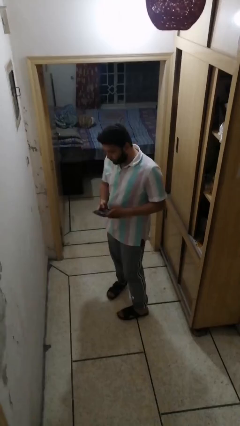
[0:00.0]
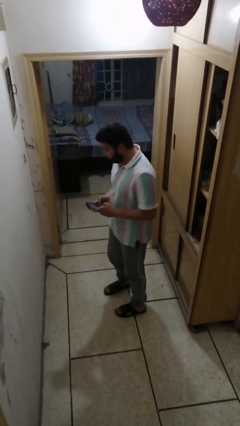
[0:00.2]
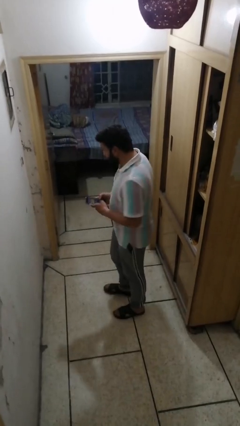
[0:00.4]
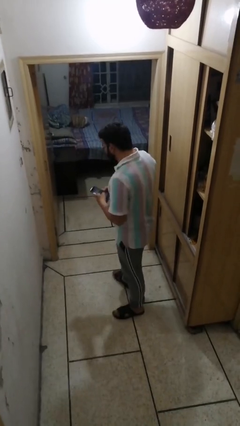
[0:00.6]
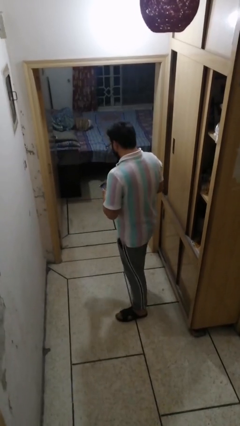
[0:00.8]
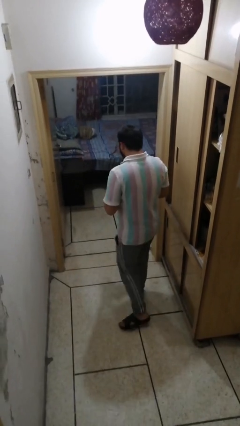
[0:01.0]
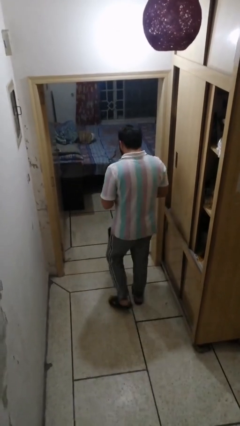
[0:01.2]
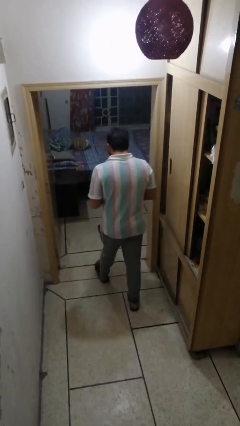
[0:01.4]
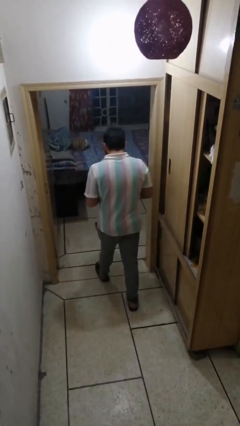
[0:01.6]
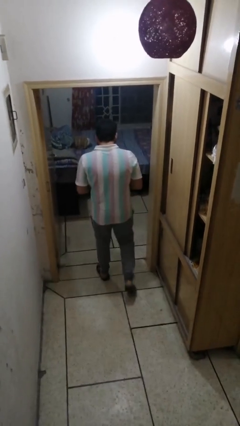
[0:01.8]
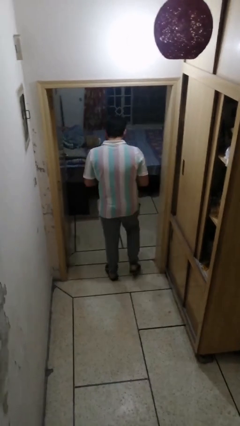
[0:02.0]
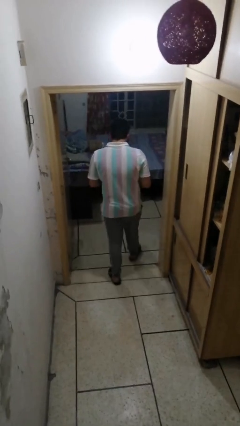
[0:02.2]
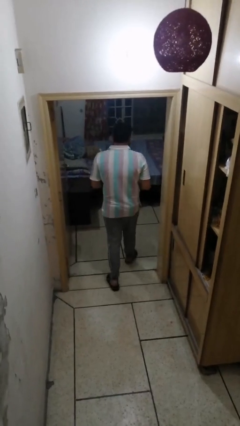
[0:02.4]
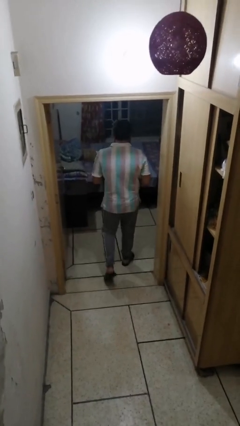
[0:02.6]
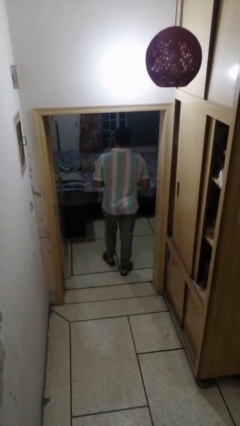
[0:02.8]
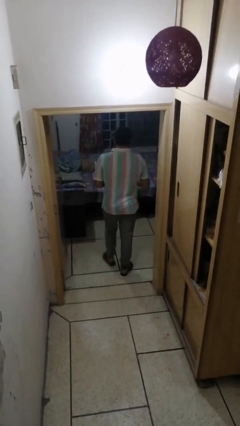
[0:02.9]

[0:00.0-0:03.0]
person exits scene through structure

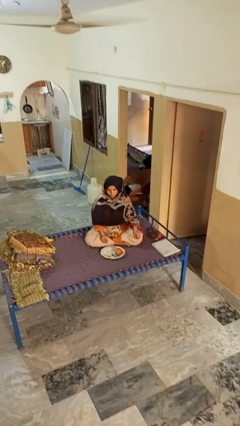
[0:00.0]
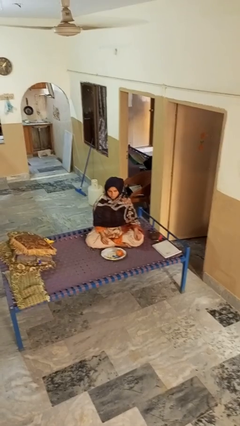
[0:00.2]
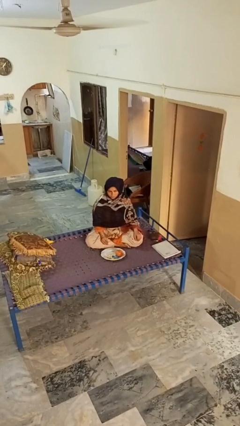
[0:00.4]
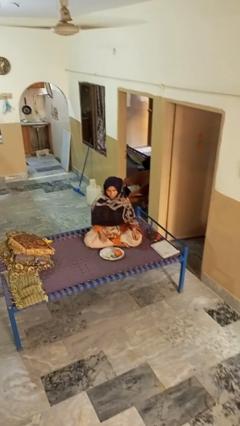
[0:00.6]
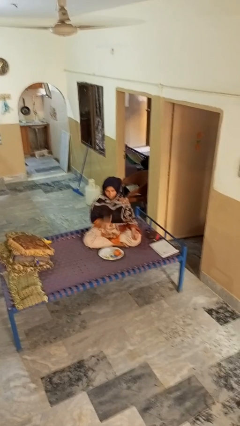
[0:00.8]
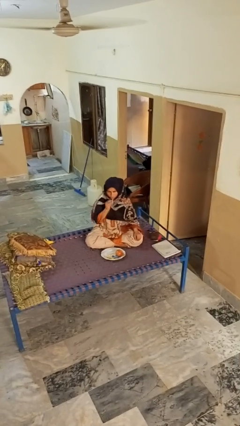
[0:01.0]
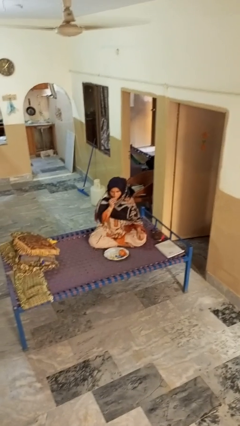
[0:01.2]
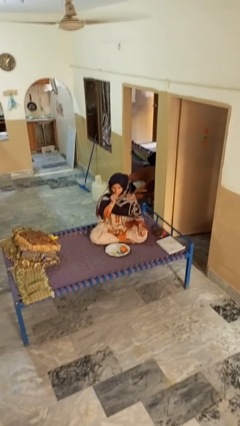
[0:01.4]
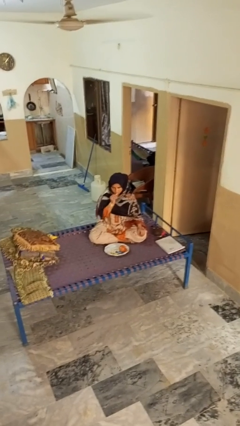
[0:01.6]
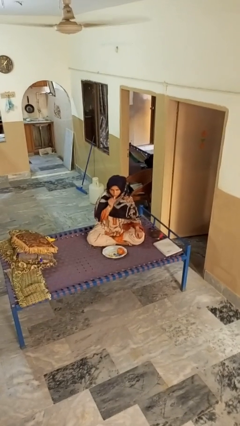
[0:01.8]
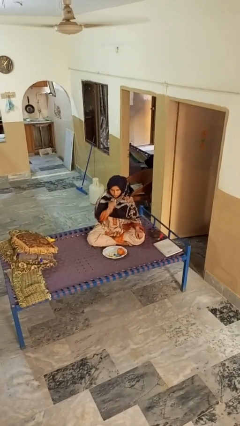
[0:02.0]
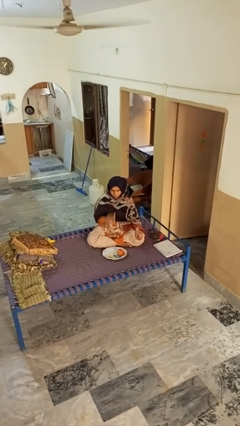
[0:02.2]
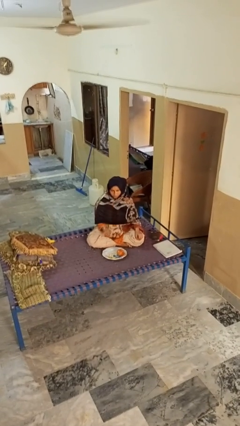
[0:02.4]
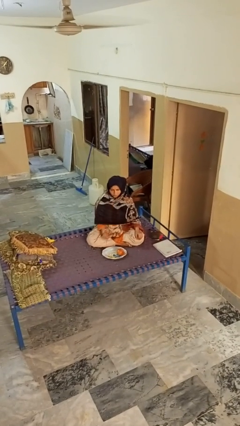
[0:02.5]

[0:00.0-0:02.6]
person eats apple

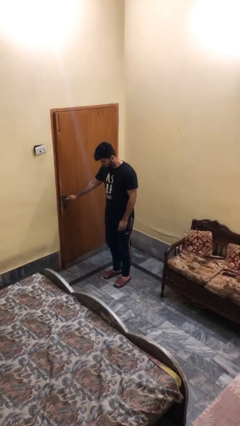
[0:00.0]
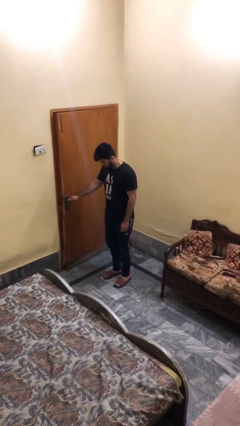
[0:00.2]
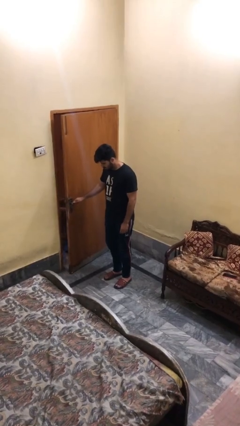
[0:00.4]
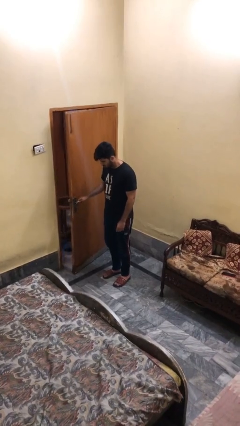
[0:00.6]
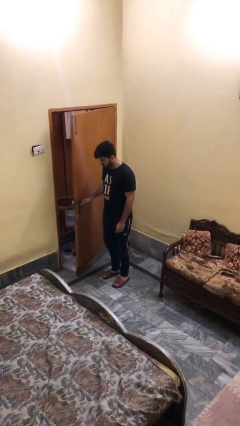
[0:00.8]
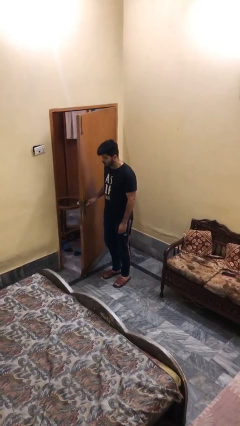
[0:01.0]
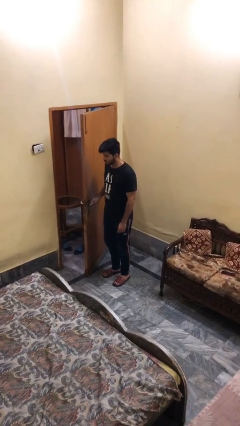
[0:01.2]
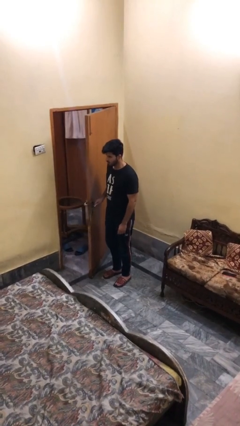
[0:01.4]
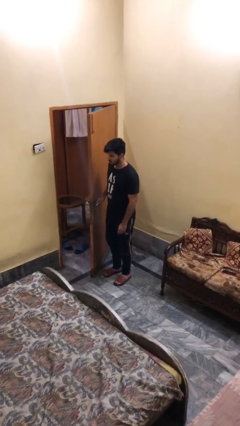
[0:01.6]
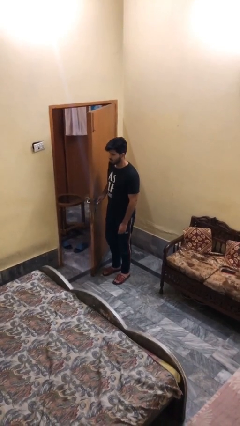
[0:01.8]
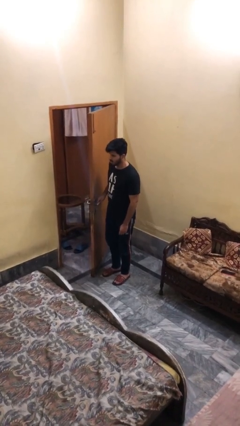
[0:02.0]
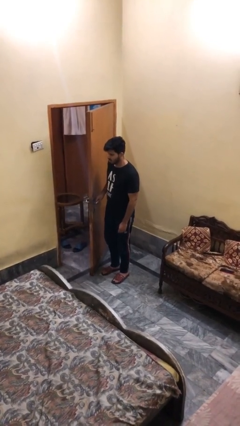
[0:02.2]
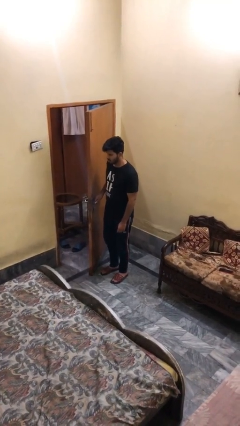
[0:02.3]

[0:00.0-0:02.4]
person opens facility door

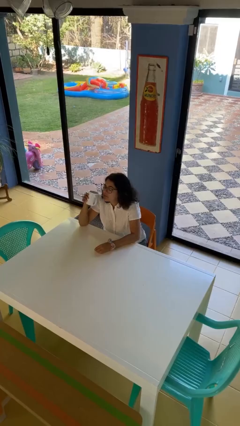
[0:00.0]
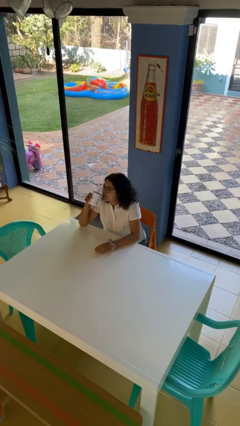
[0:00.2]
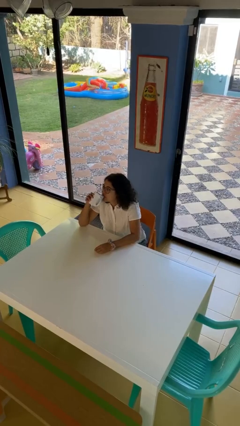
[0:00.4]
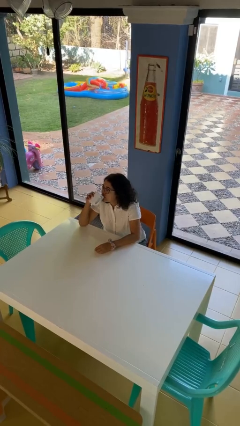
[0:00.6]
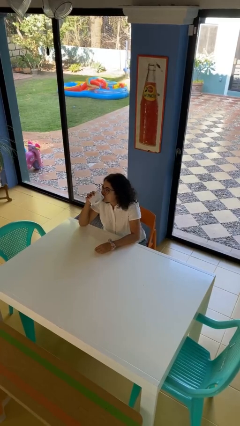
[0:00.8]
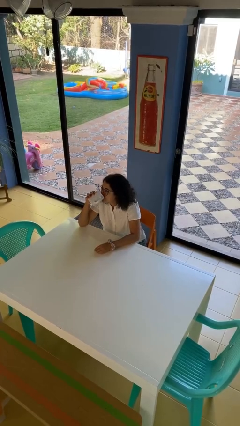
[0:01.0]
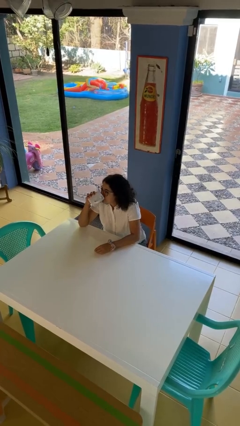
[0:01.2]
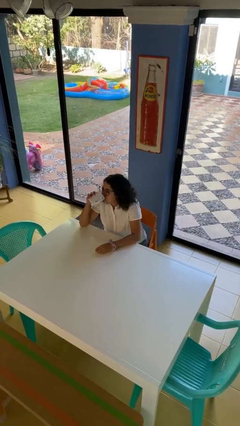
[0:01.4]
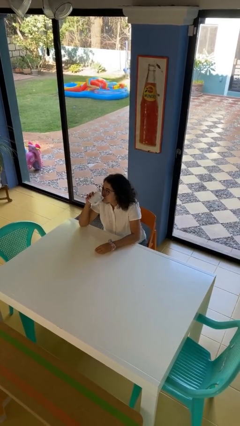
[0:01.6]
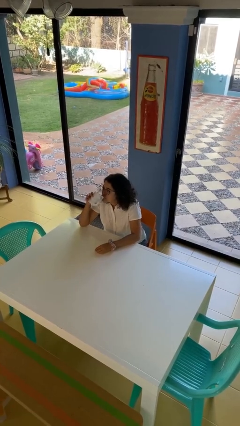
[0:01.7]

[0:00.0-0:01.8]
person drinks from mug

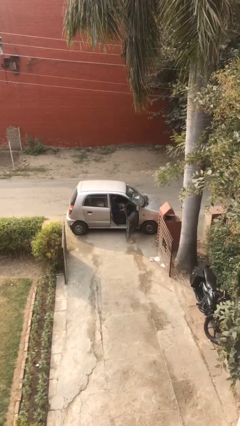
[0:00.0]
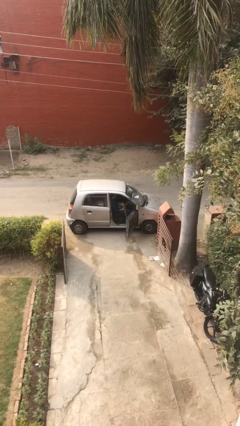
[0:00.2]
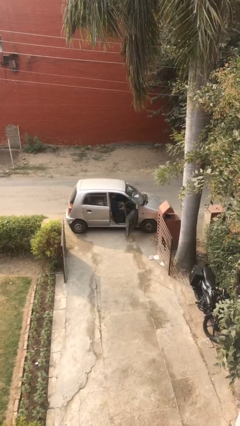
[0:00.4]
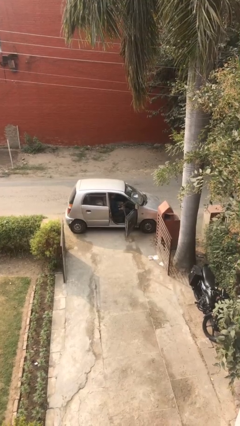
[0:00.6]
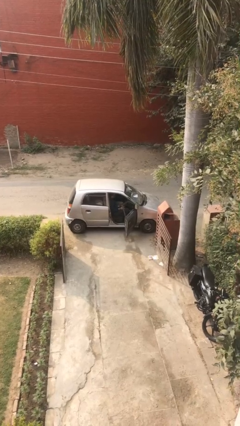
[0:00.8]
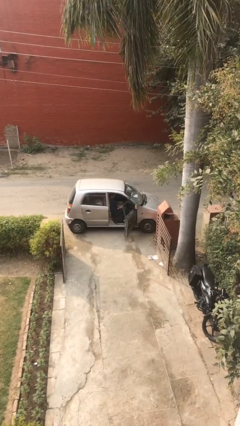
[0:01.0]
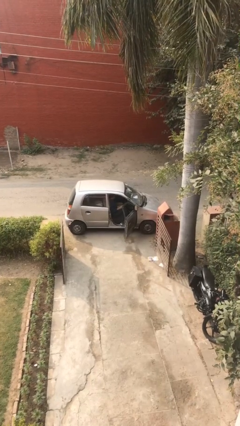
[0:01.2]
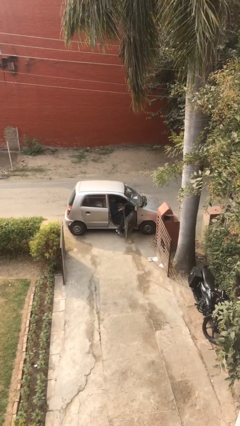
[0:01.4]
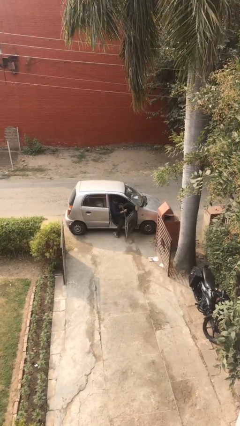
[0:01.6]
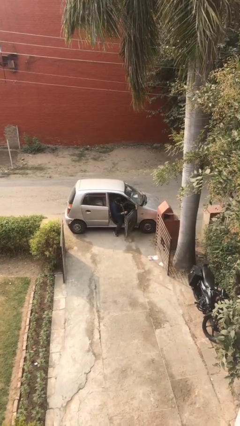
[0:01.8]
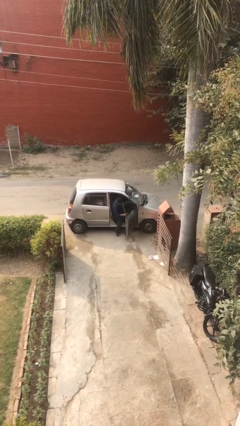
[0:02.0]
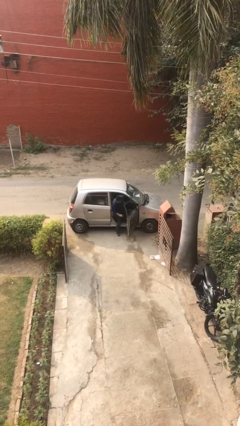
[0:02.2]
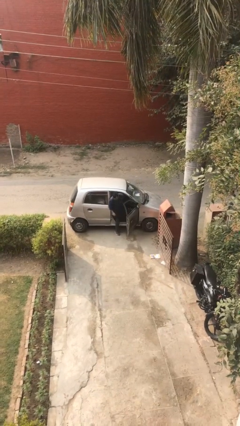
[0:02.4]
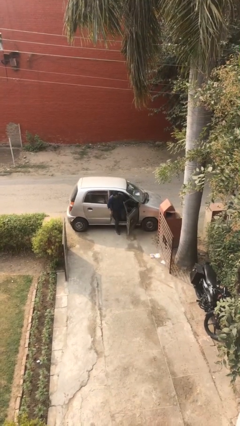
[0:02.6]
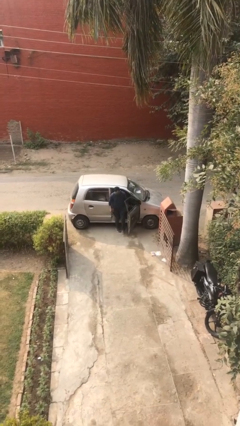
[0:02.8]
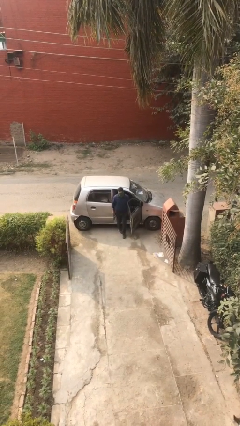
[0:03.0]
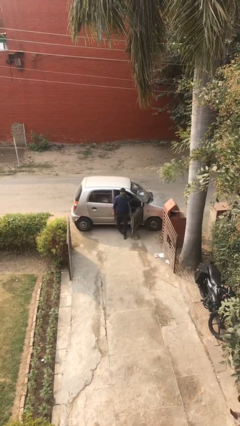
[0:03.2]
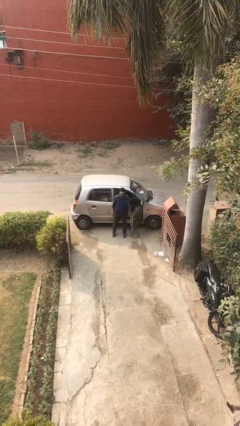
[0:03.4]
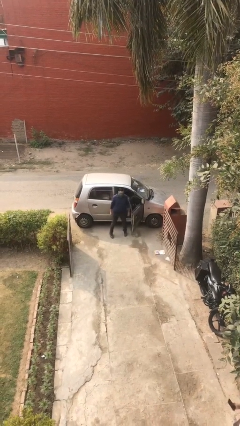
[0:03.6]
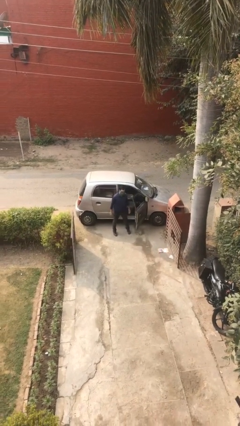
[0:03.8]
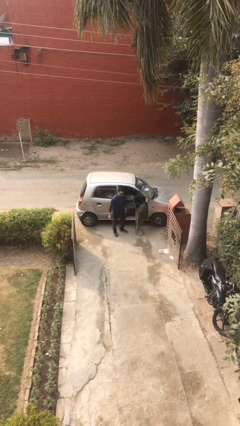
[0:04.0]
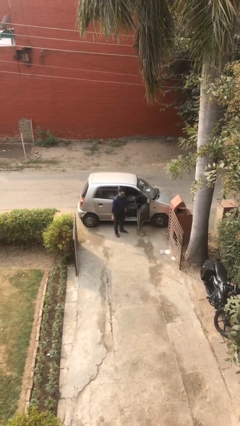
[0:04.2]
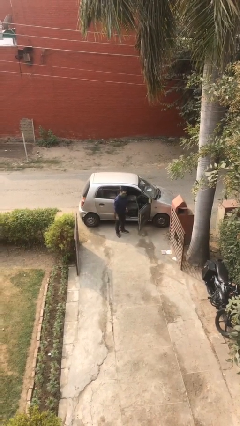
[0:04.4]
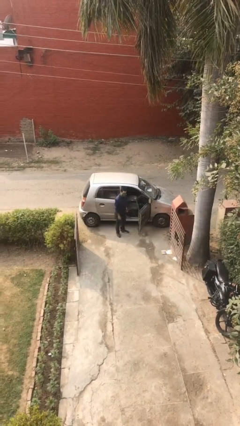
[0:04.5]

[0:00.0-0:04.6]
person exits car

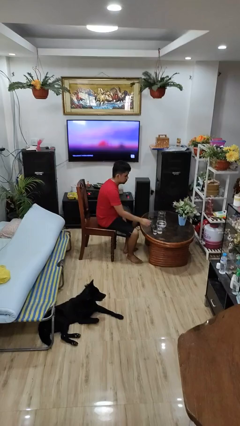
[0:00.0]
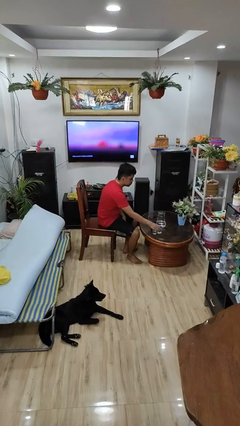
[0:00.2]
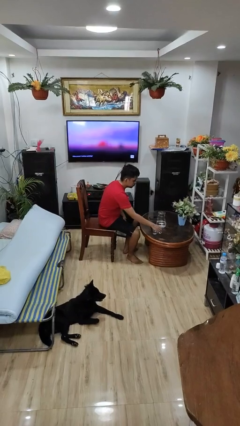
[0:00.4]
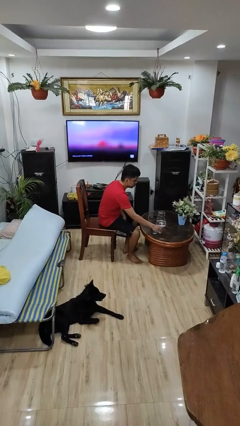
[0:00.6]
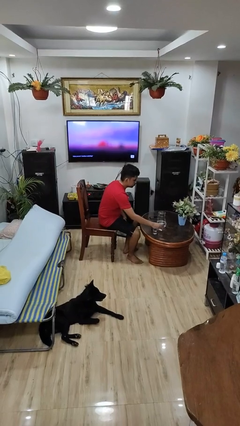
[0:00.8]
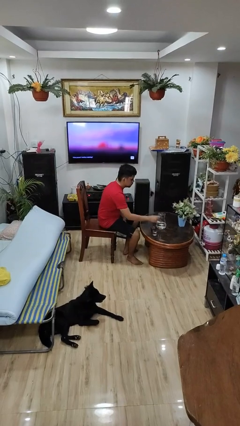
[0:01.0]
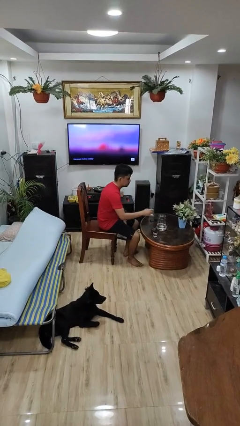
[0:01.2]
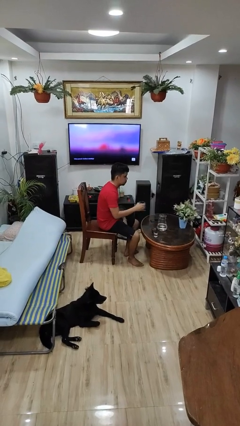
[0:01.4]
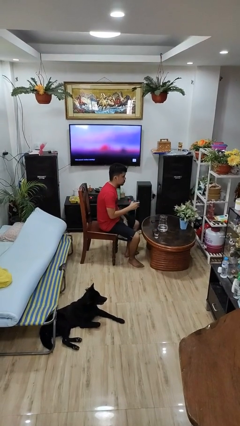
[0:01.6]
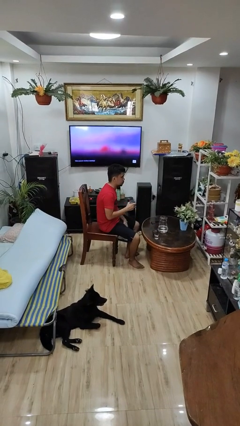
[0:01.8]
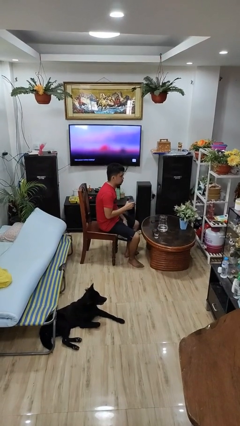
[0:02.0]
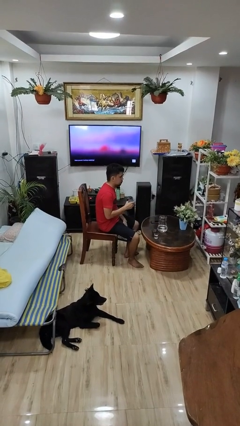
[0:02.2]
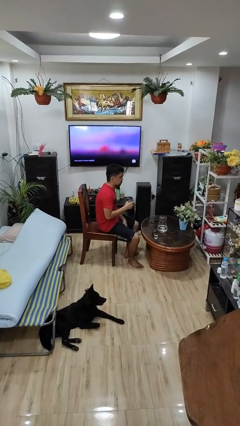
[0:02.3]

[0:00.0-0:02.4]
person picks up object from table

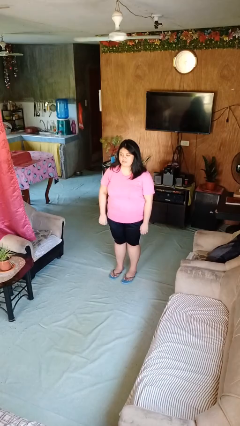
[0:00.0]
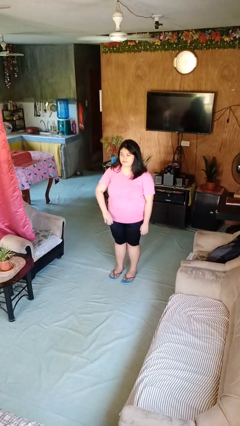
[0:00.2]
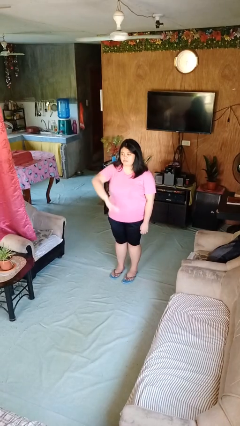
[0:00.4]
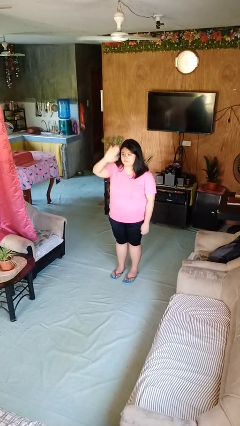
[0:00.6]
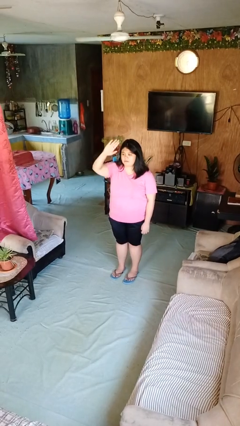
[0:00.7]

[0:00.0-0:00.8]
person gestures swipe up
